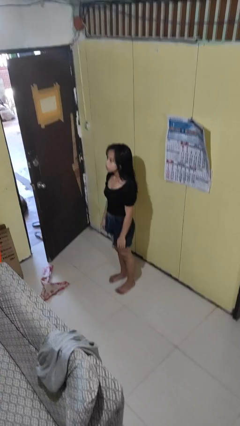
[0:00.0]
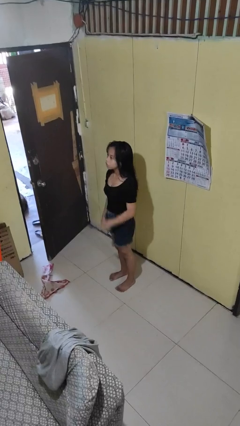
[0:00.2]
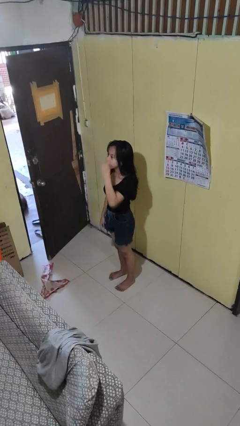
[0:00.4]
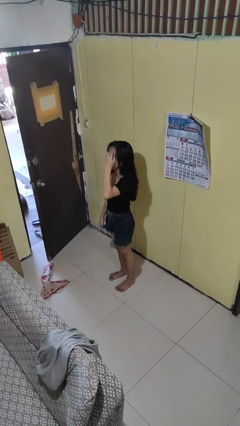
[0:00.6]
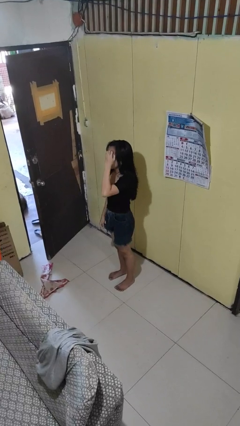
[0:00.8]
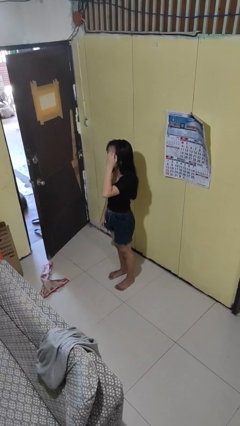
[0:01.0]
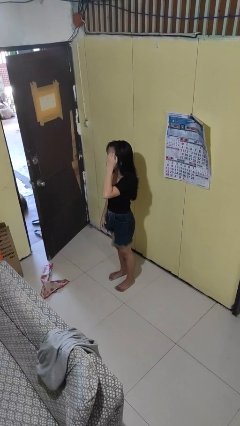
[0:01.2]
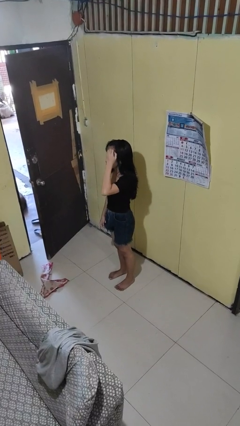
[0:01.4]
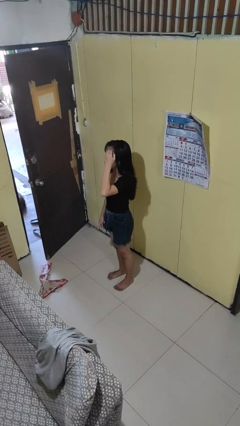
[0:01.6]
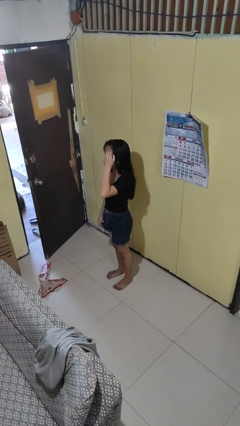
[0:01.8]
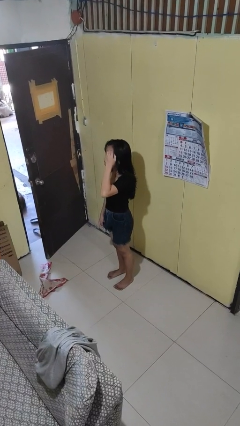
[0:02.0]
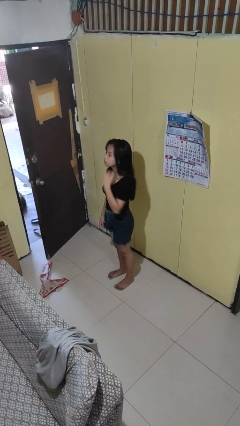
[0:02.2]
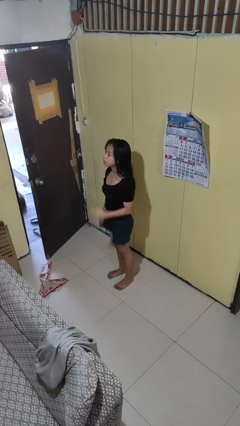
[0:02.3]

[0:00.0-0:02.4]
person scratches face

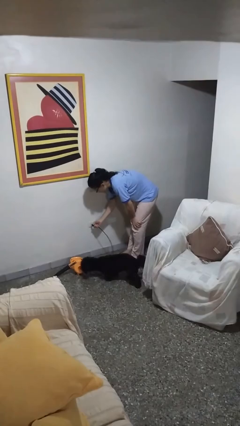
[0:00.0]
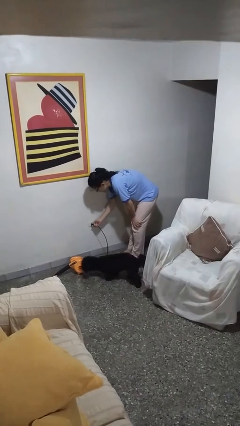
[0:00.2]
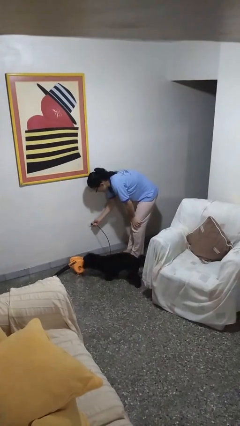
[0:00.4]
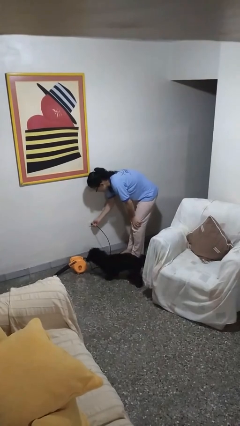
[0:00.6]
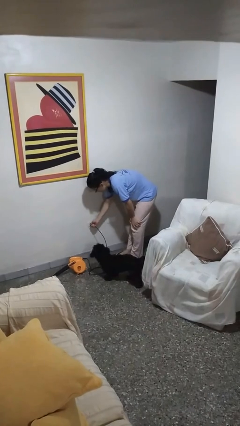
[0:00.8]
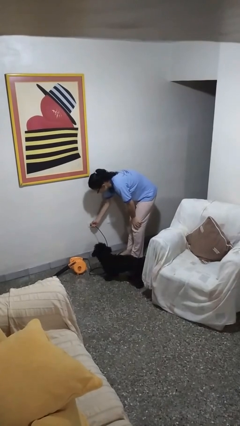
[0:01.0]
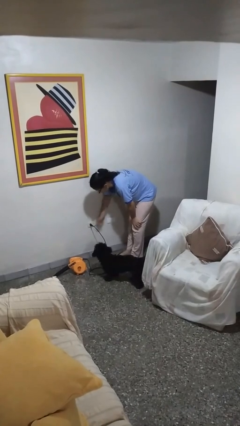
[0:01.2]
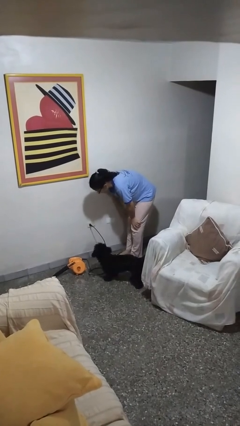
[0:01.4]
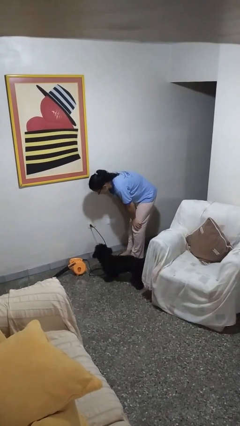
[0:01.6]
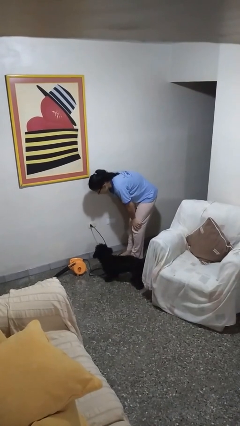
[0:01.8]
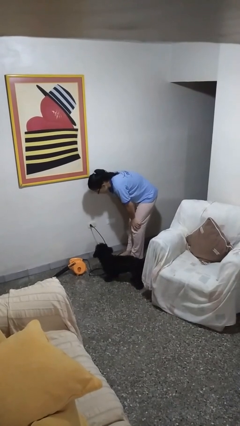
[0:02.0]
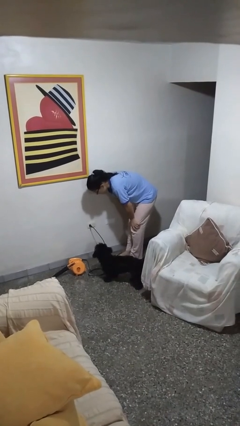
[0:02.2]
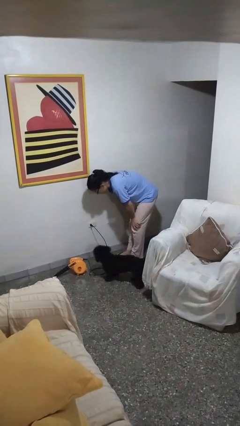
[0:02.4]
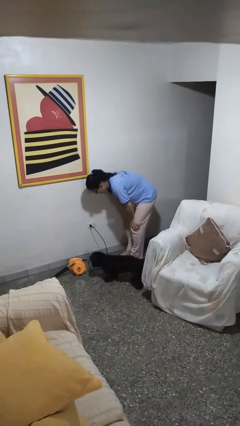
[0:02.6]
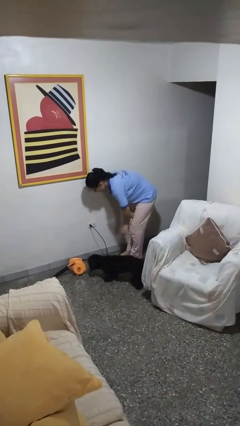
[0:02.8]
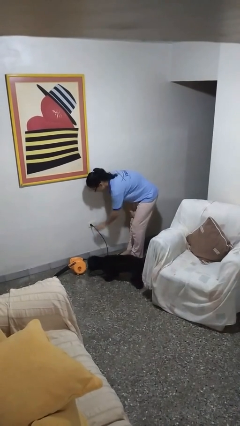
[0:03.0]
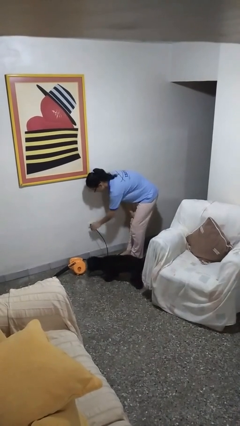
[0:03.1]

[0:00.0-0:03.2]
person plugs into electrical socket

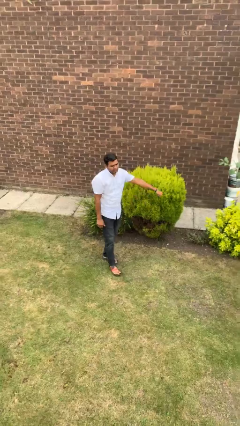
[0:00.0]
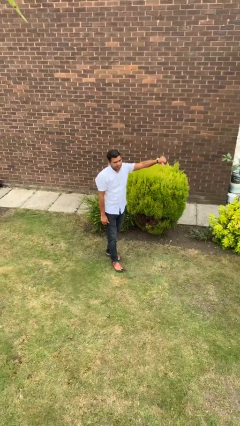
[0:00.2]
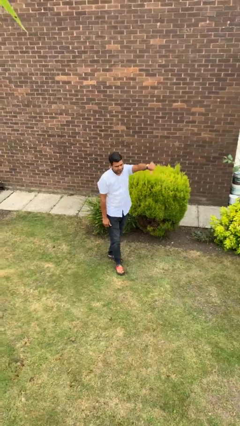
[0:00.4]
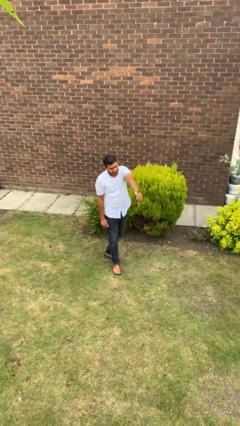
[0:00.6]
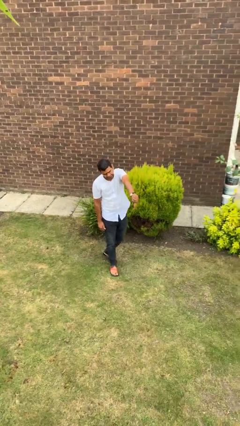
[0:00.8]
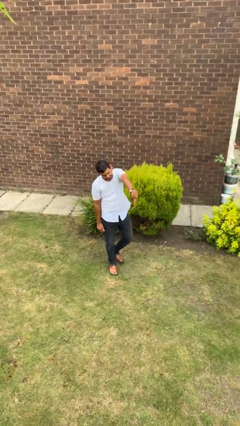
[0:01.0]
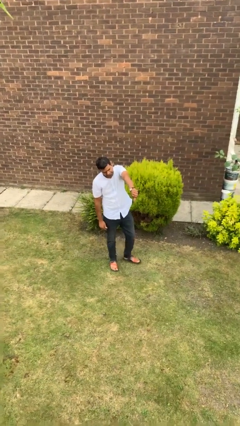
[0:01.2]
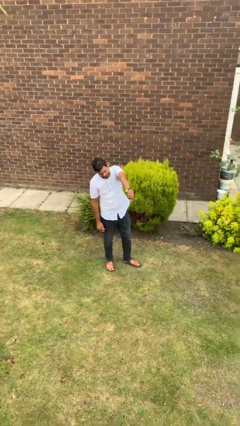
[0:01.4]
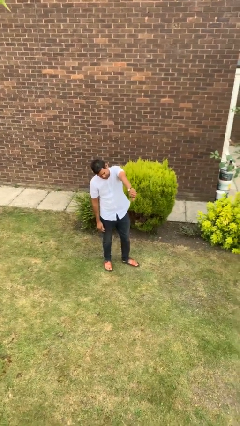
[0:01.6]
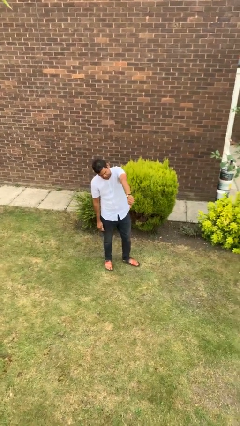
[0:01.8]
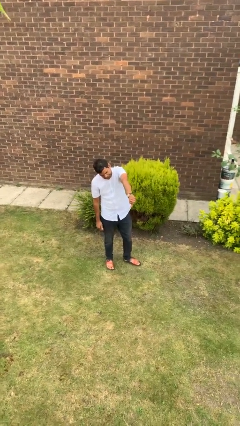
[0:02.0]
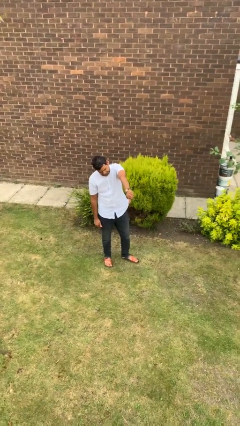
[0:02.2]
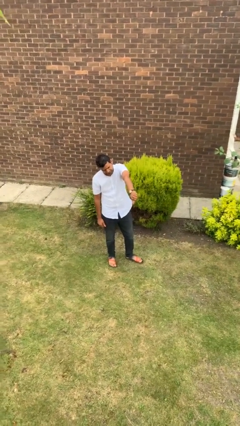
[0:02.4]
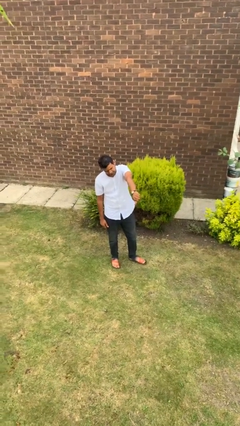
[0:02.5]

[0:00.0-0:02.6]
person gestures thumbs down

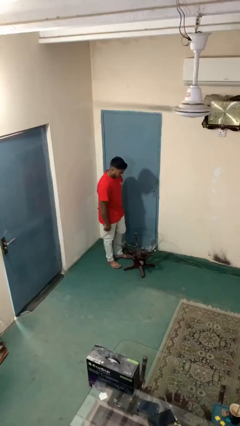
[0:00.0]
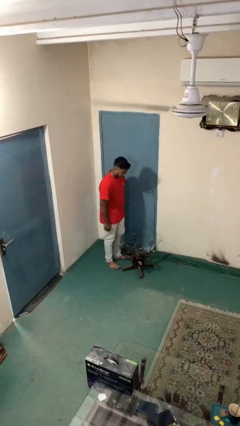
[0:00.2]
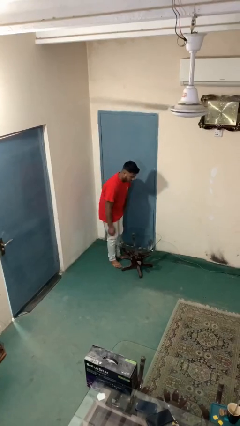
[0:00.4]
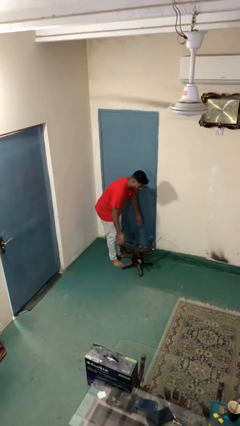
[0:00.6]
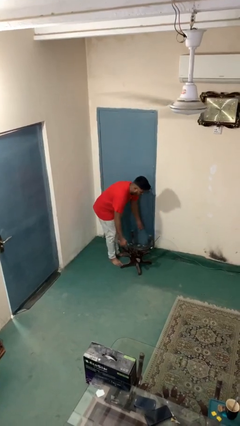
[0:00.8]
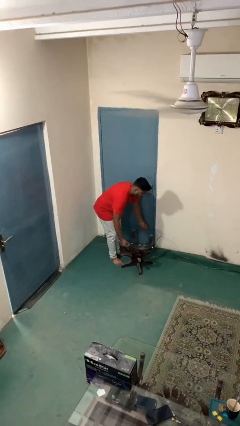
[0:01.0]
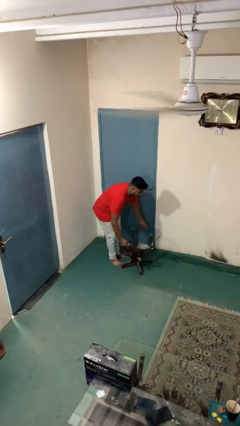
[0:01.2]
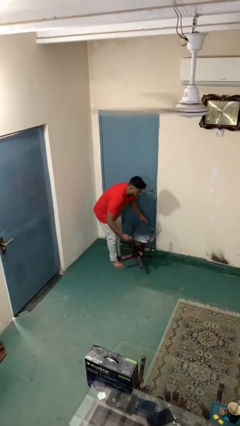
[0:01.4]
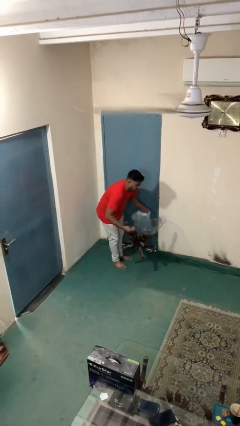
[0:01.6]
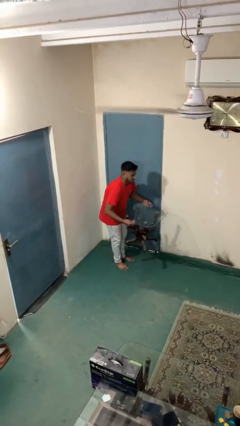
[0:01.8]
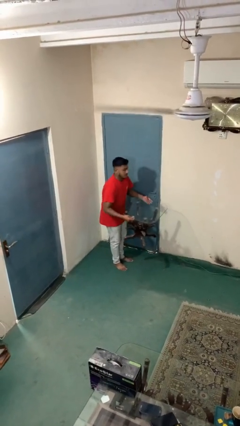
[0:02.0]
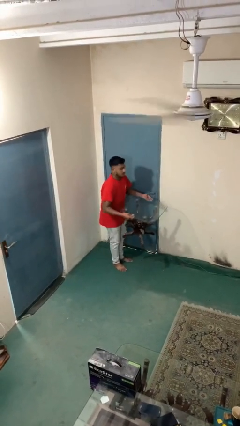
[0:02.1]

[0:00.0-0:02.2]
person picks up object from floor

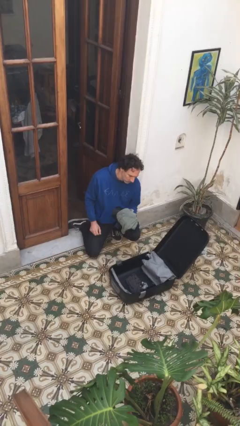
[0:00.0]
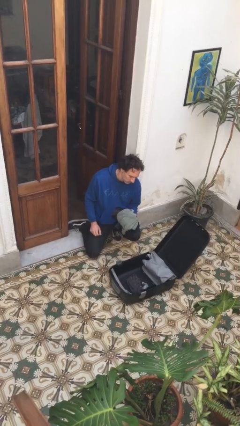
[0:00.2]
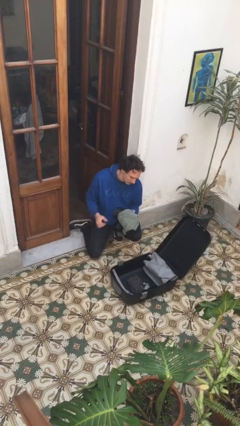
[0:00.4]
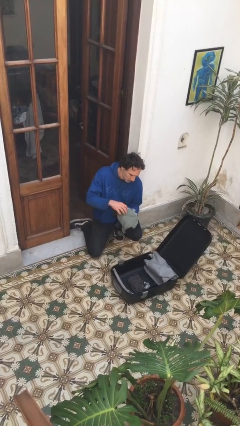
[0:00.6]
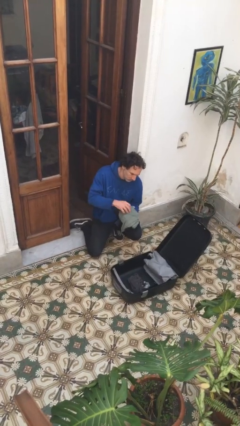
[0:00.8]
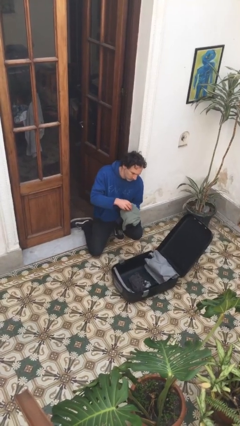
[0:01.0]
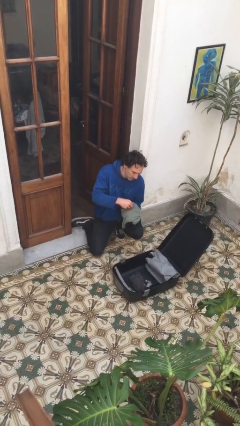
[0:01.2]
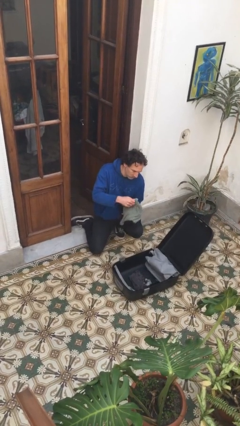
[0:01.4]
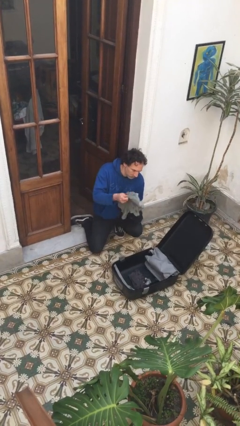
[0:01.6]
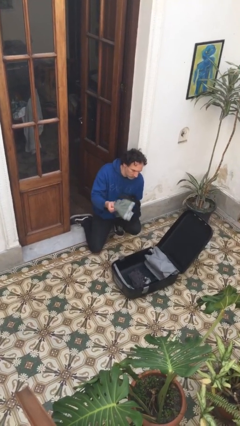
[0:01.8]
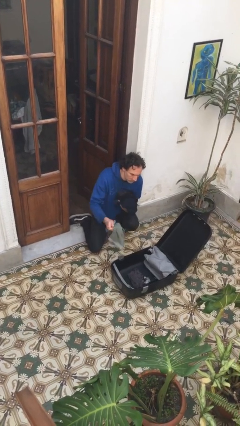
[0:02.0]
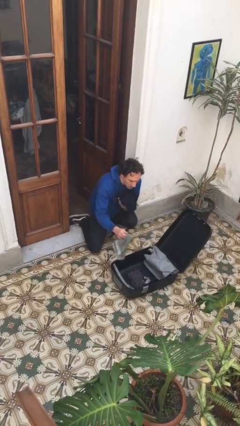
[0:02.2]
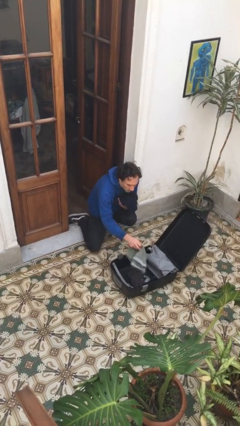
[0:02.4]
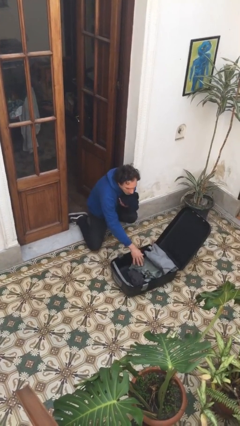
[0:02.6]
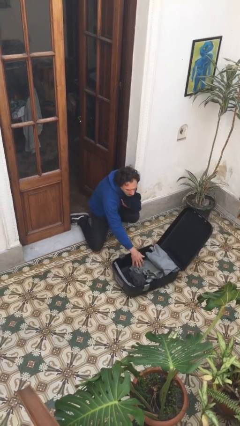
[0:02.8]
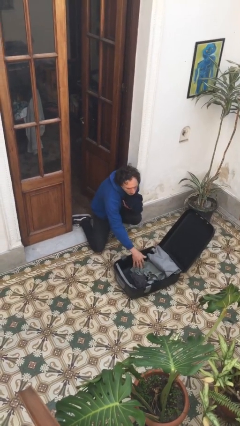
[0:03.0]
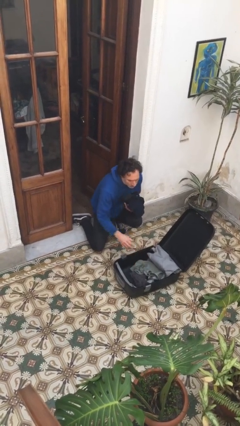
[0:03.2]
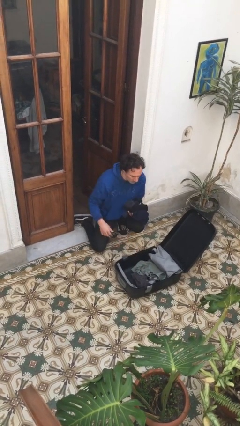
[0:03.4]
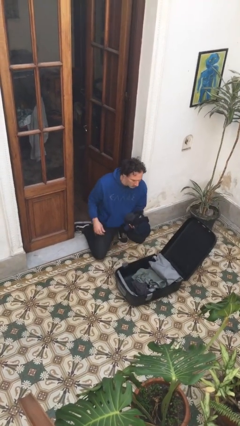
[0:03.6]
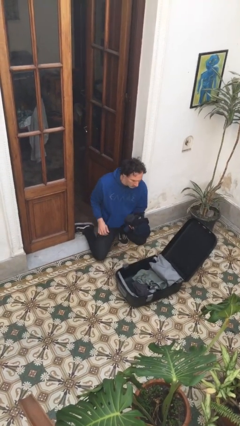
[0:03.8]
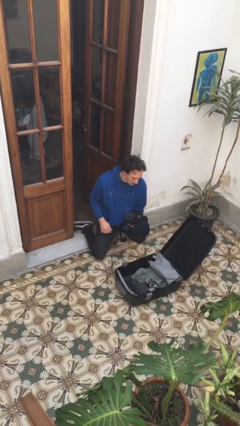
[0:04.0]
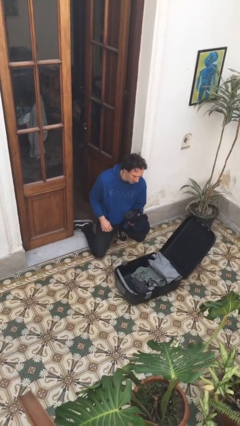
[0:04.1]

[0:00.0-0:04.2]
person loads clothes into suitcase

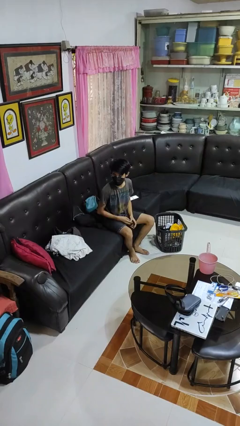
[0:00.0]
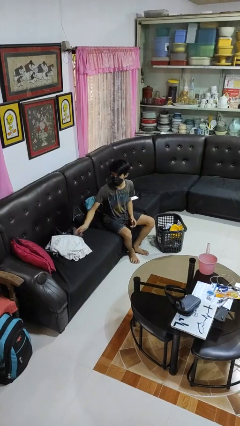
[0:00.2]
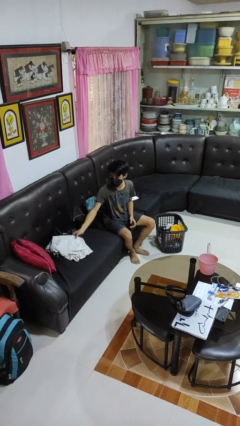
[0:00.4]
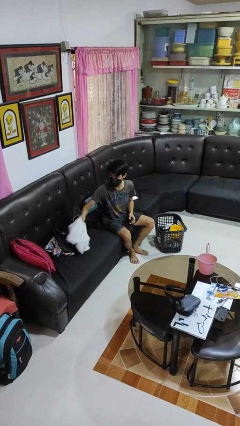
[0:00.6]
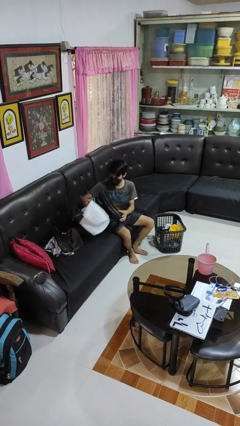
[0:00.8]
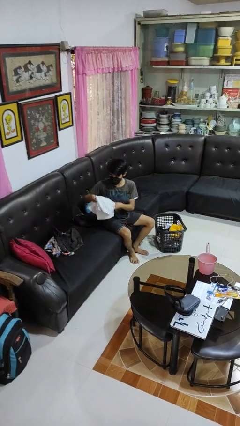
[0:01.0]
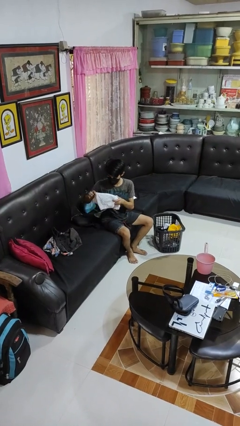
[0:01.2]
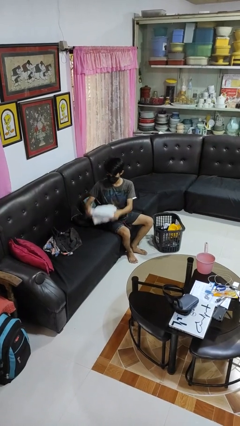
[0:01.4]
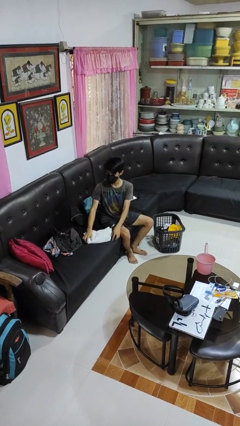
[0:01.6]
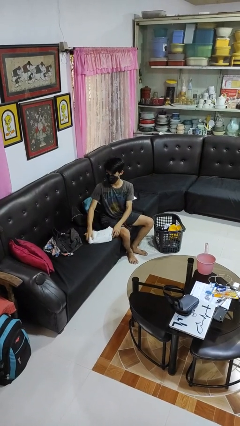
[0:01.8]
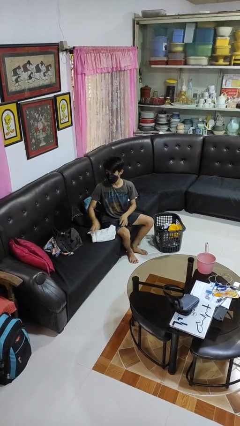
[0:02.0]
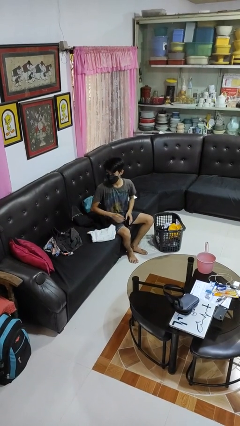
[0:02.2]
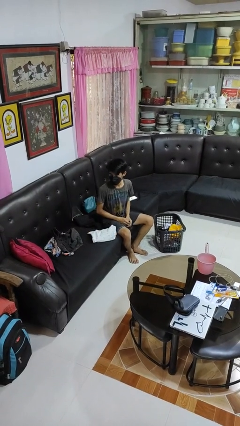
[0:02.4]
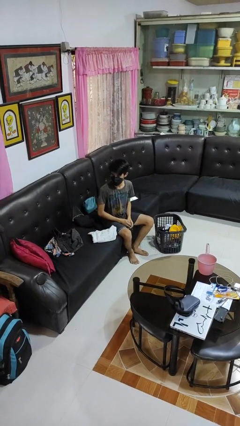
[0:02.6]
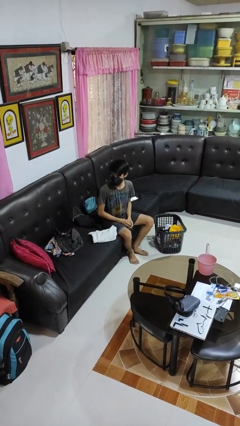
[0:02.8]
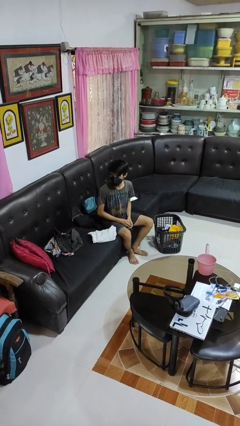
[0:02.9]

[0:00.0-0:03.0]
person folds pants
